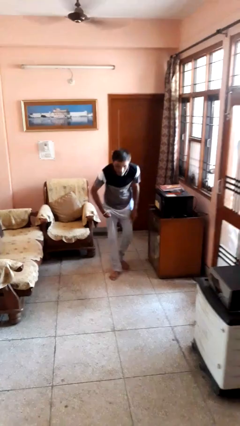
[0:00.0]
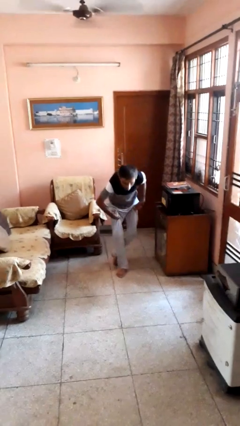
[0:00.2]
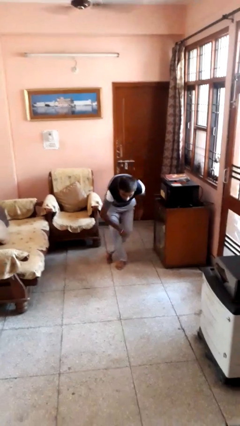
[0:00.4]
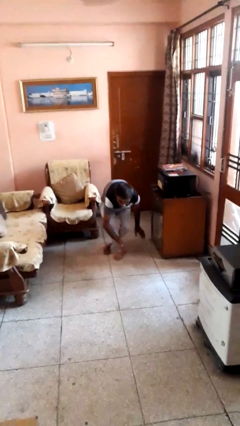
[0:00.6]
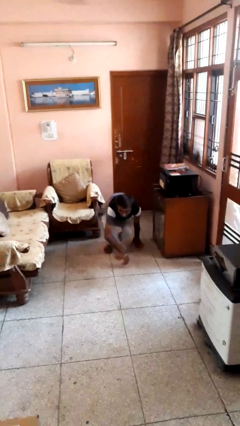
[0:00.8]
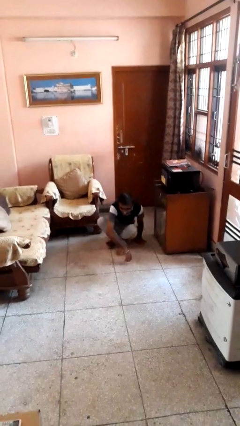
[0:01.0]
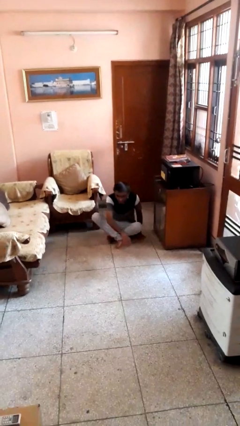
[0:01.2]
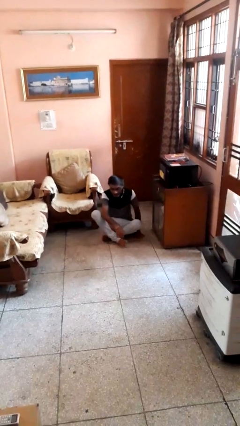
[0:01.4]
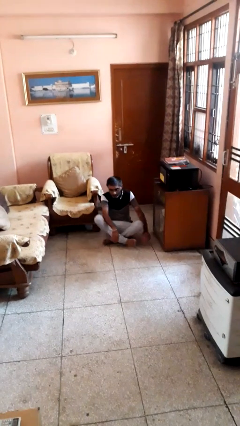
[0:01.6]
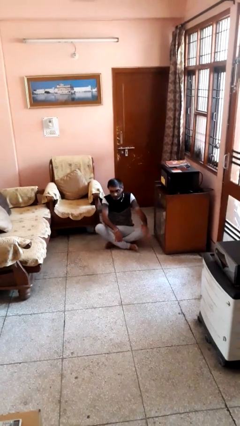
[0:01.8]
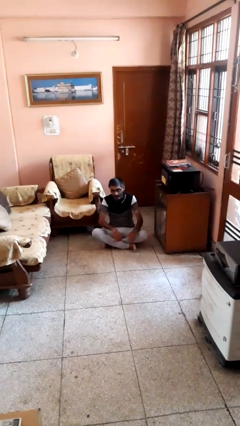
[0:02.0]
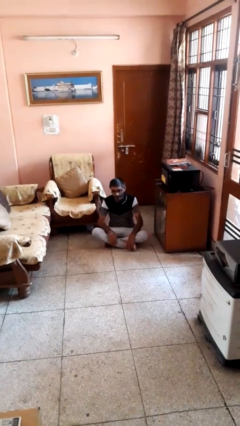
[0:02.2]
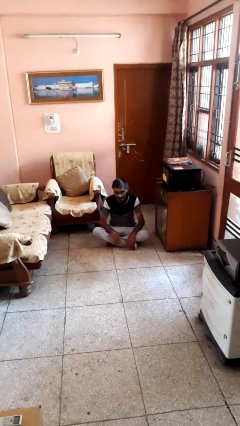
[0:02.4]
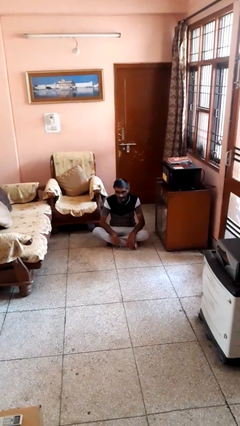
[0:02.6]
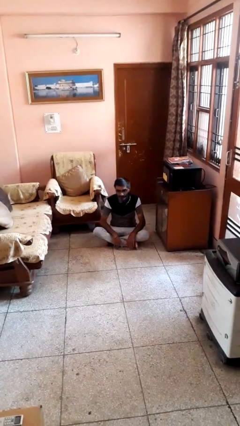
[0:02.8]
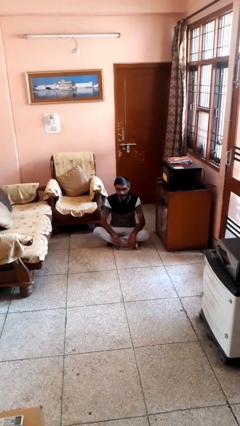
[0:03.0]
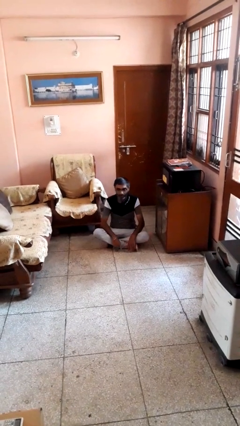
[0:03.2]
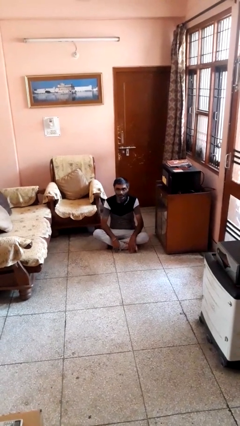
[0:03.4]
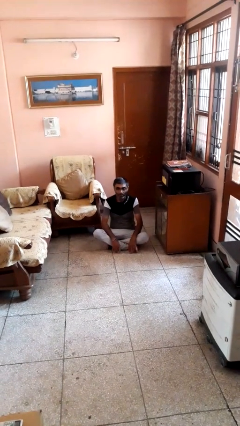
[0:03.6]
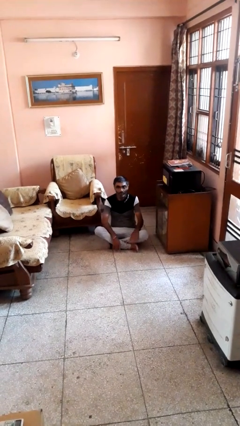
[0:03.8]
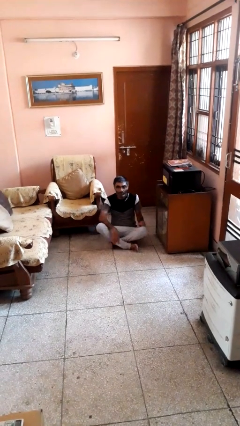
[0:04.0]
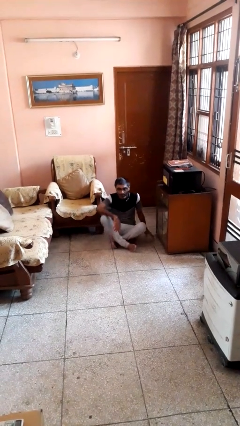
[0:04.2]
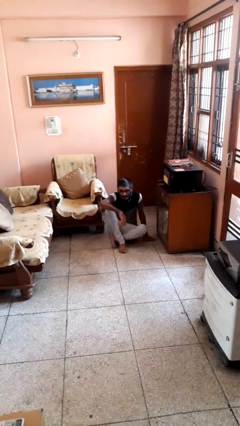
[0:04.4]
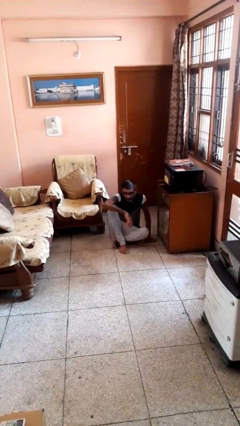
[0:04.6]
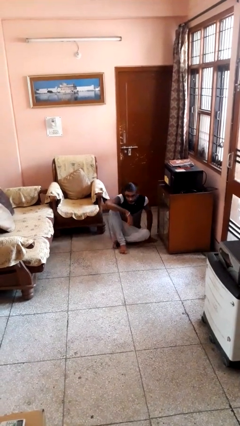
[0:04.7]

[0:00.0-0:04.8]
person sits crisscross

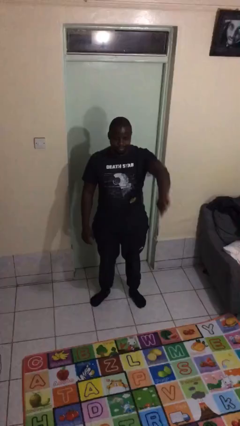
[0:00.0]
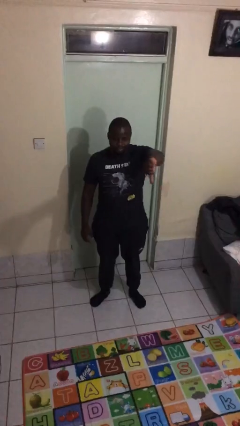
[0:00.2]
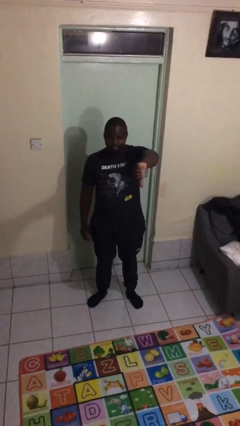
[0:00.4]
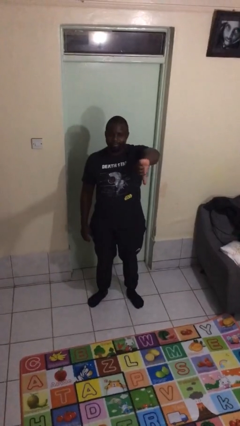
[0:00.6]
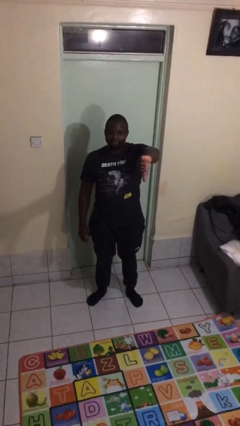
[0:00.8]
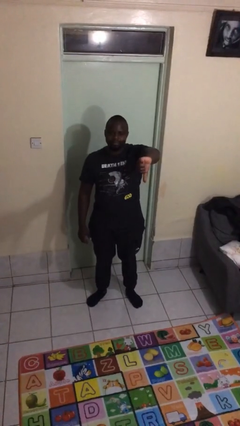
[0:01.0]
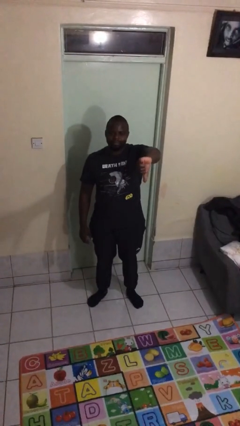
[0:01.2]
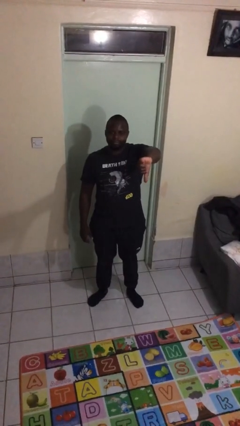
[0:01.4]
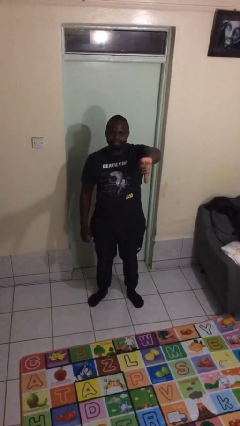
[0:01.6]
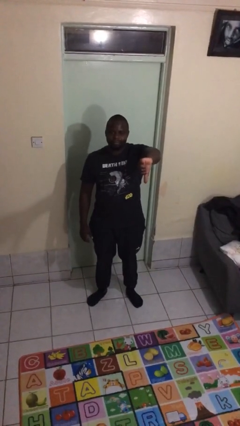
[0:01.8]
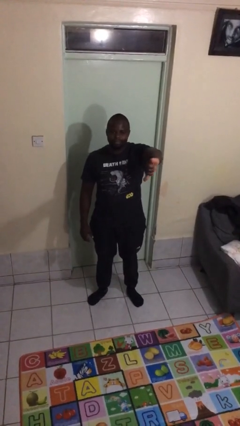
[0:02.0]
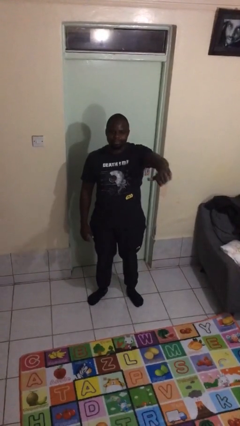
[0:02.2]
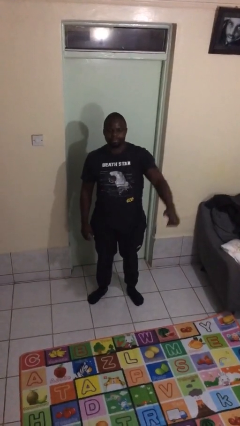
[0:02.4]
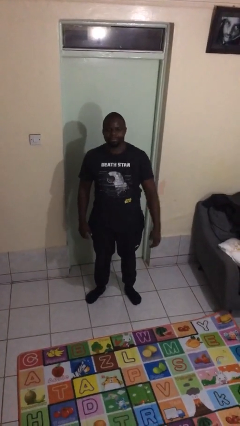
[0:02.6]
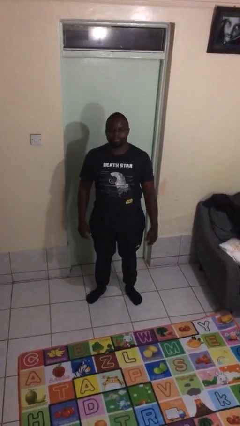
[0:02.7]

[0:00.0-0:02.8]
person gestures thumbs down

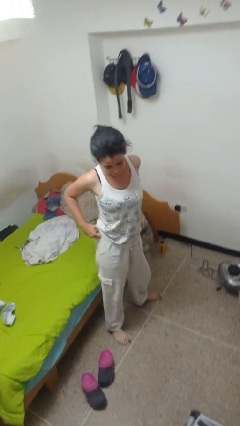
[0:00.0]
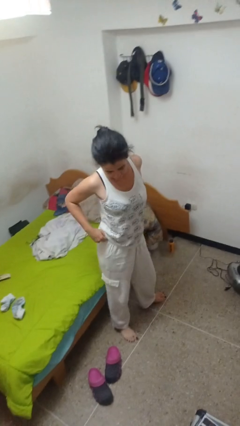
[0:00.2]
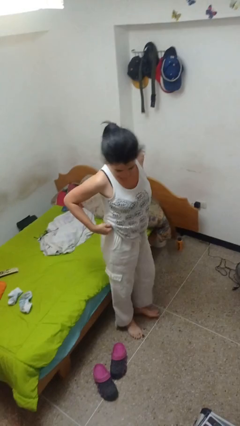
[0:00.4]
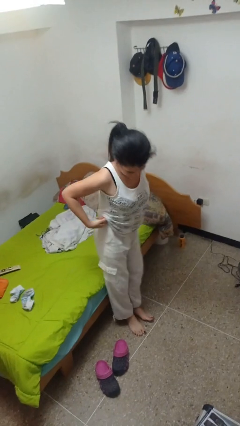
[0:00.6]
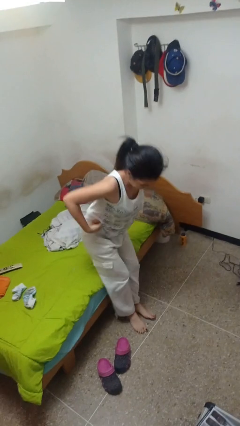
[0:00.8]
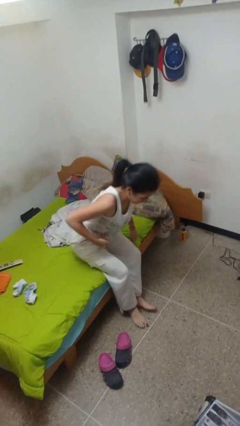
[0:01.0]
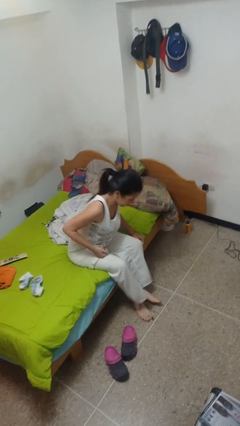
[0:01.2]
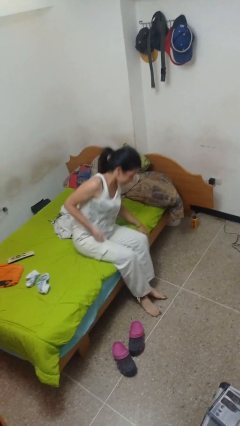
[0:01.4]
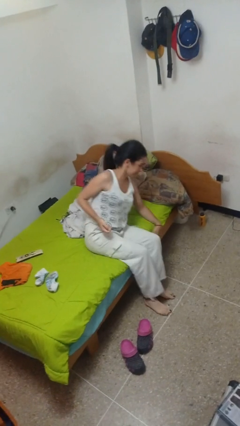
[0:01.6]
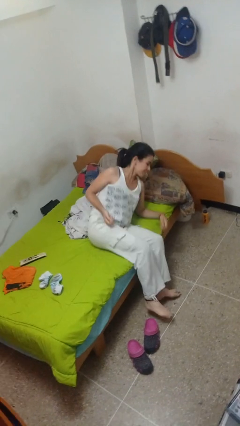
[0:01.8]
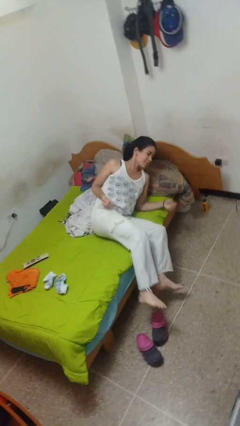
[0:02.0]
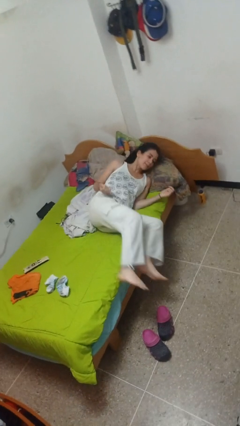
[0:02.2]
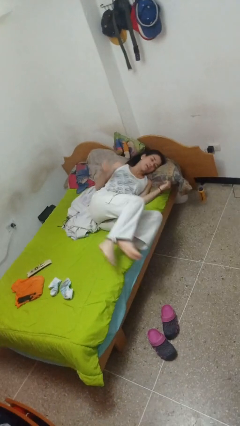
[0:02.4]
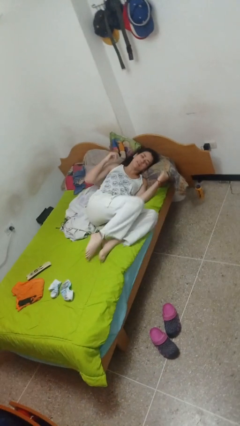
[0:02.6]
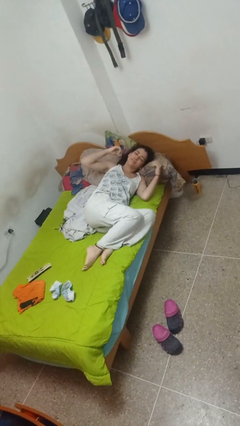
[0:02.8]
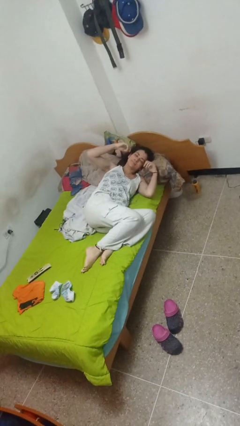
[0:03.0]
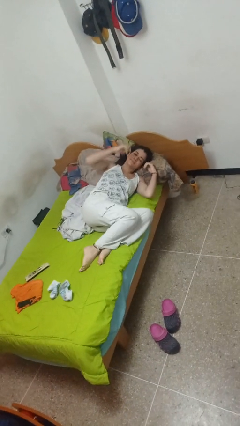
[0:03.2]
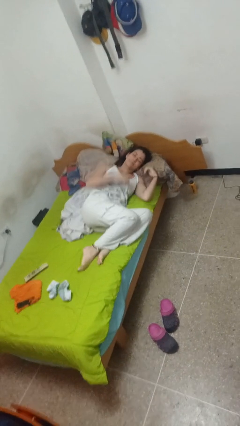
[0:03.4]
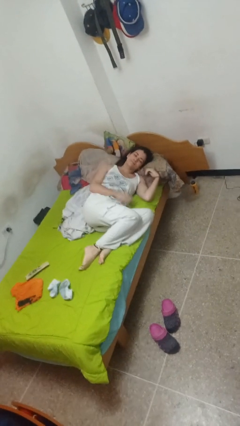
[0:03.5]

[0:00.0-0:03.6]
person lies down on bed

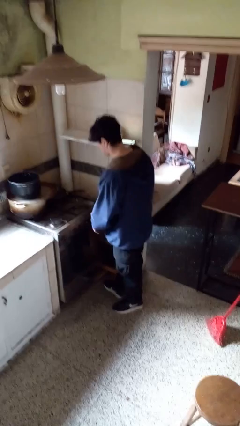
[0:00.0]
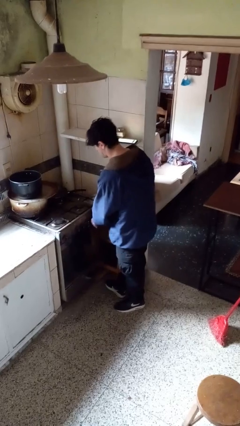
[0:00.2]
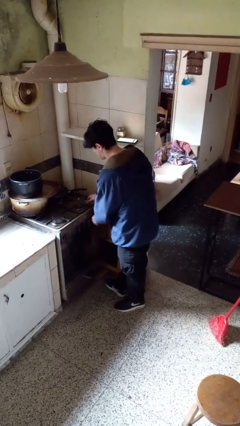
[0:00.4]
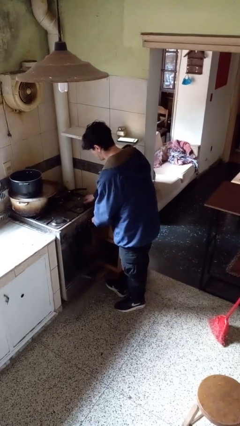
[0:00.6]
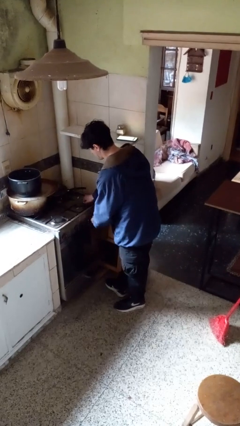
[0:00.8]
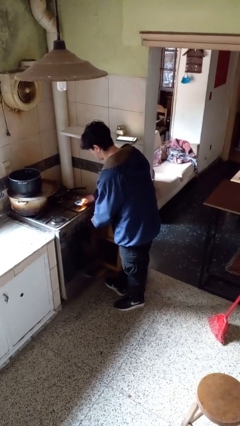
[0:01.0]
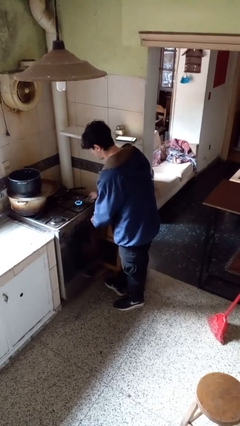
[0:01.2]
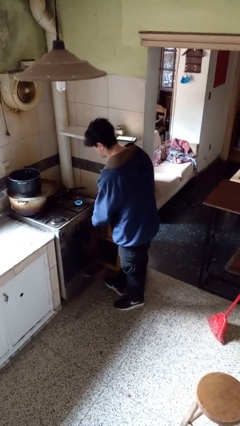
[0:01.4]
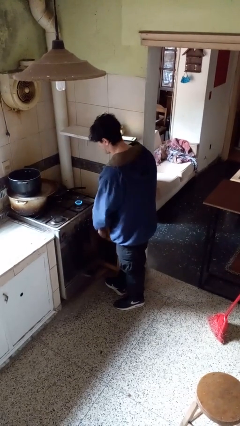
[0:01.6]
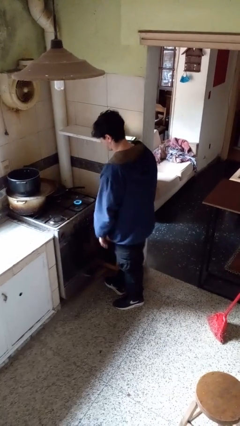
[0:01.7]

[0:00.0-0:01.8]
person turns on stovetop

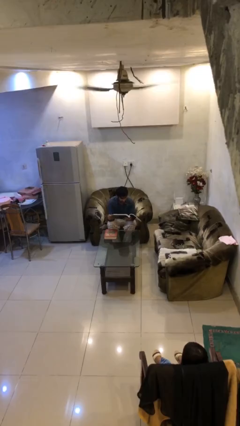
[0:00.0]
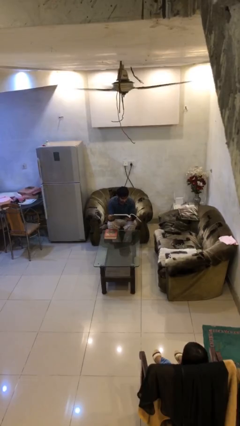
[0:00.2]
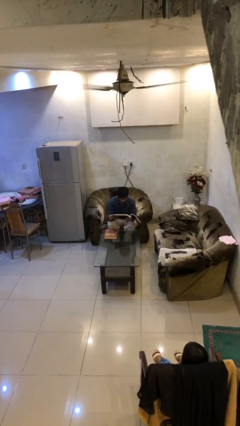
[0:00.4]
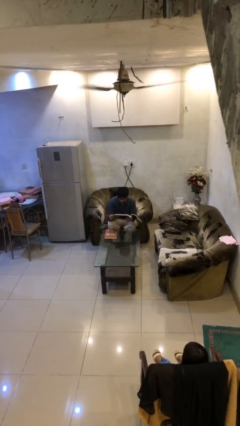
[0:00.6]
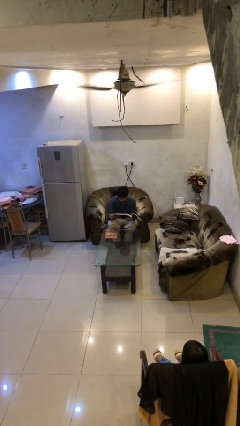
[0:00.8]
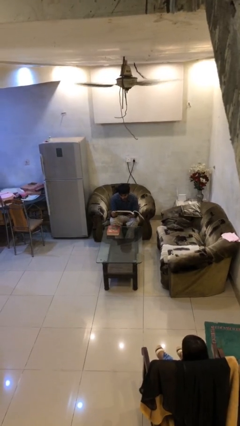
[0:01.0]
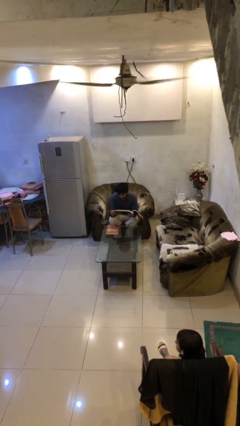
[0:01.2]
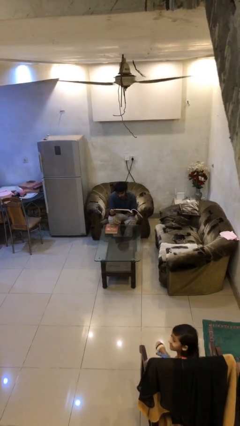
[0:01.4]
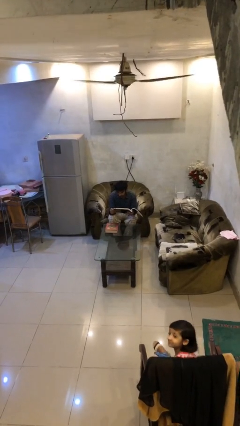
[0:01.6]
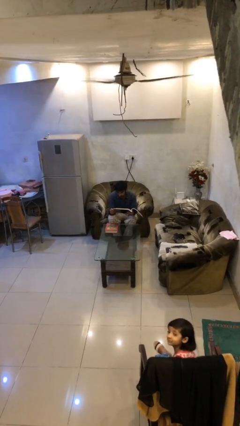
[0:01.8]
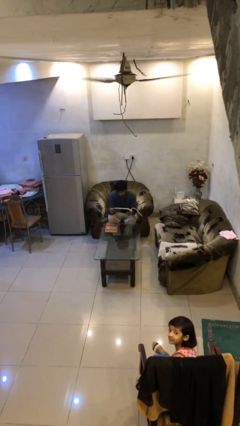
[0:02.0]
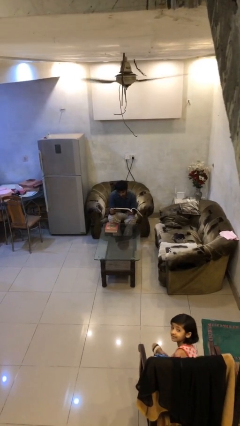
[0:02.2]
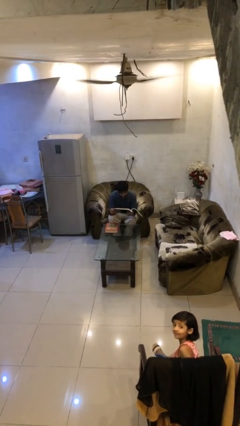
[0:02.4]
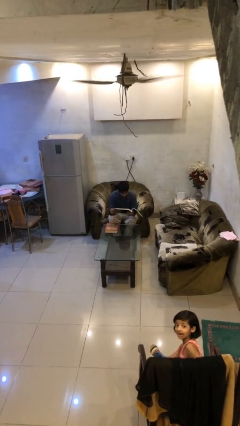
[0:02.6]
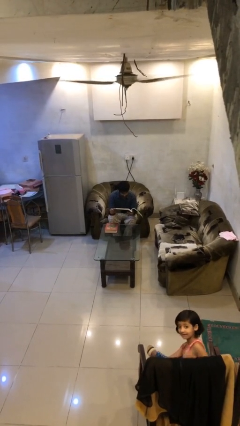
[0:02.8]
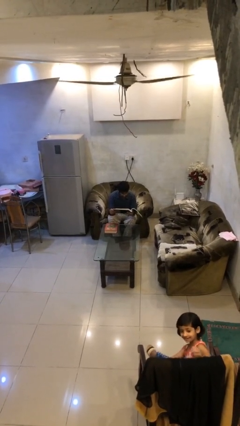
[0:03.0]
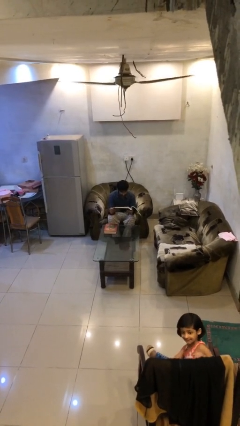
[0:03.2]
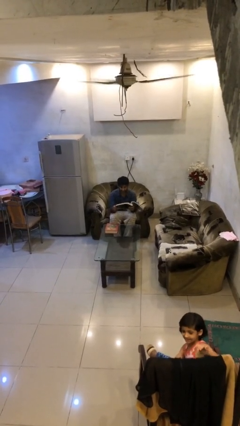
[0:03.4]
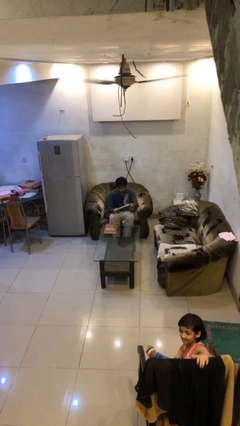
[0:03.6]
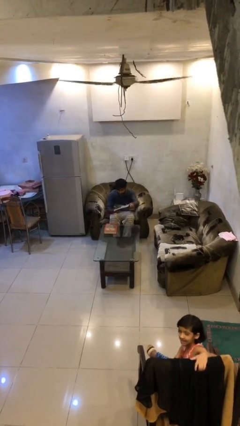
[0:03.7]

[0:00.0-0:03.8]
person reads document

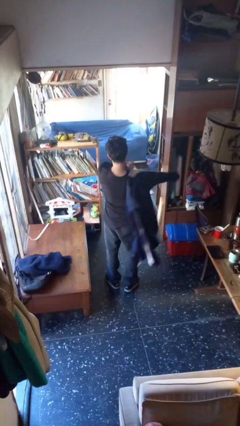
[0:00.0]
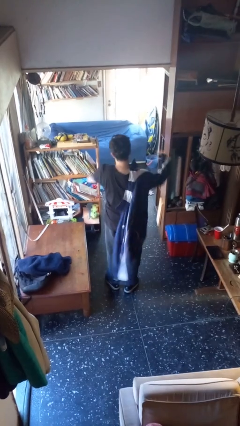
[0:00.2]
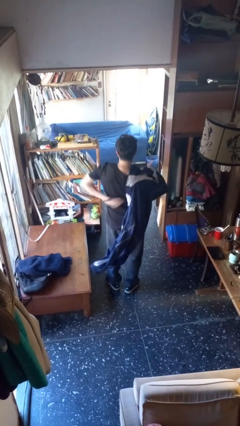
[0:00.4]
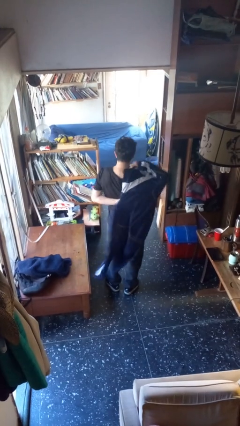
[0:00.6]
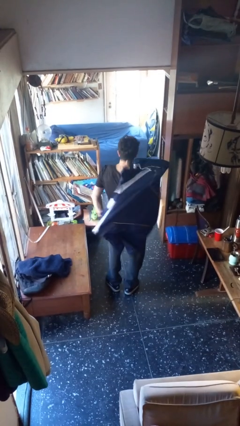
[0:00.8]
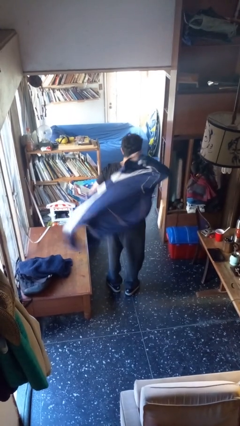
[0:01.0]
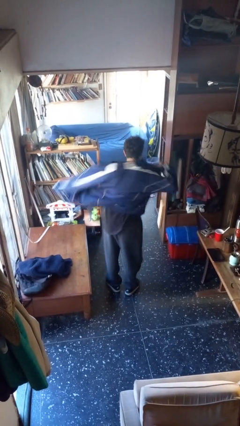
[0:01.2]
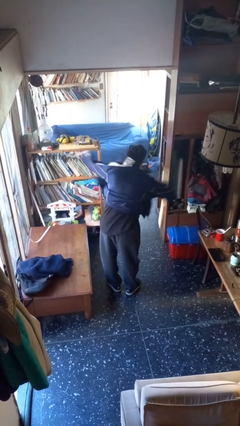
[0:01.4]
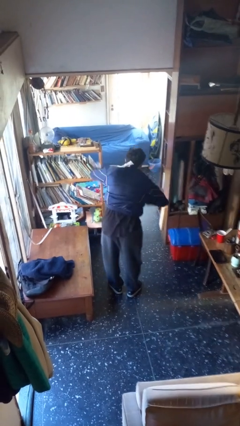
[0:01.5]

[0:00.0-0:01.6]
person puts on jacket
